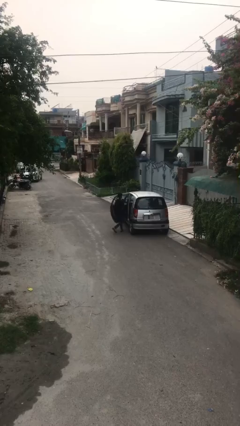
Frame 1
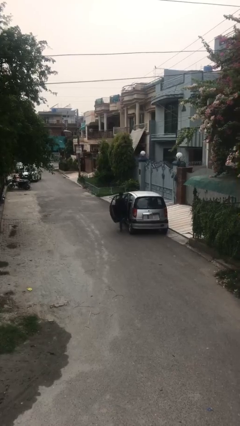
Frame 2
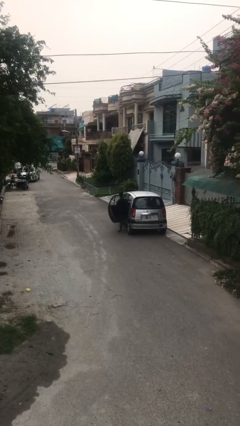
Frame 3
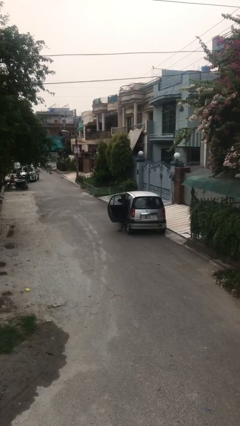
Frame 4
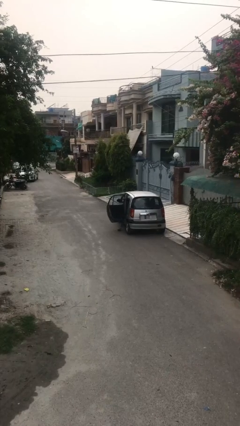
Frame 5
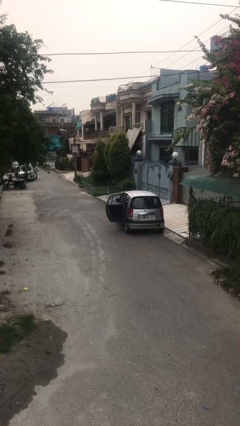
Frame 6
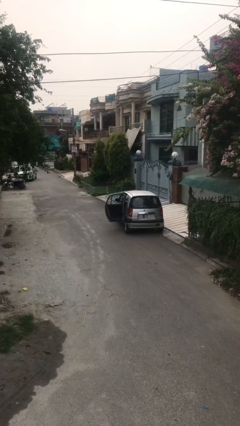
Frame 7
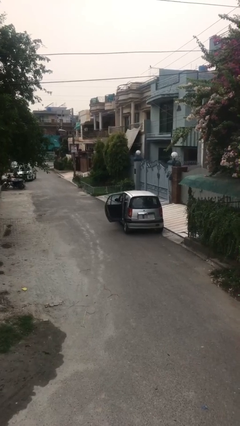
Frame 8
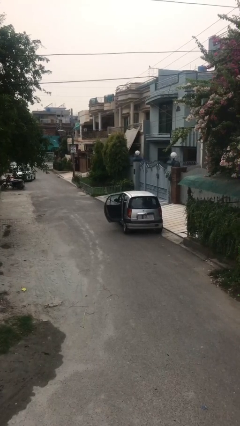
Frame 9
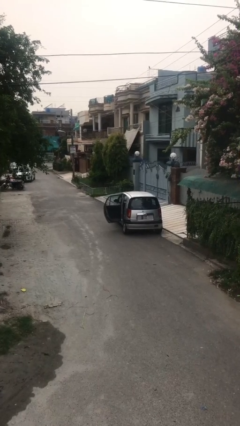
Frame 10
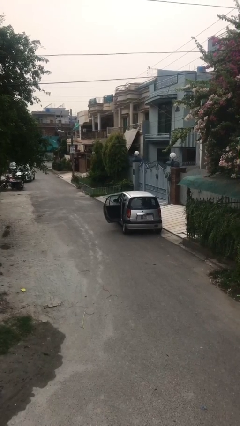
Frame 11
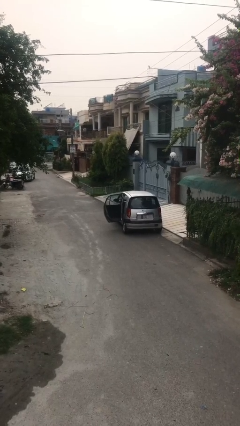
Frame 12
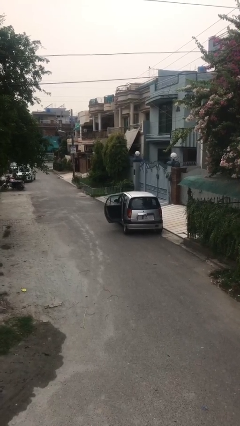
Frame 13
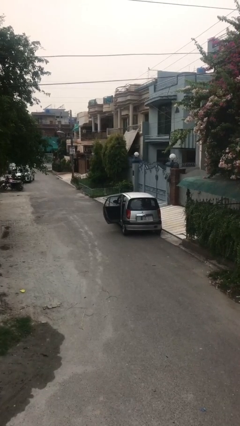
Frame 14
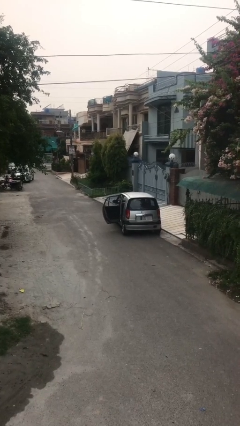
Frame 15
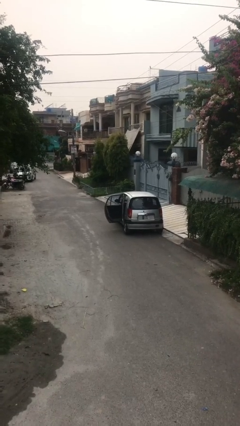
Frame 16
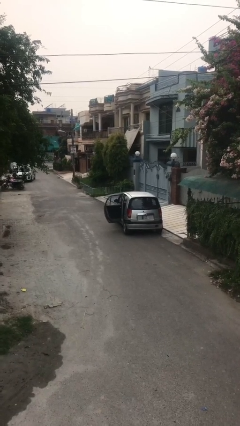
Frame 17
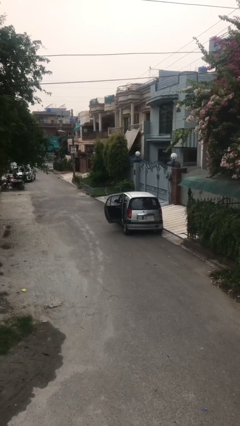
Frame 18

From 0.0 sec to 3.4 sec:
person enters car

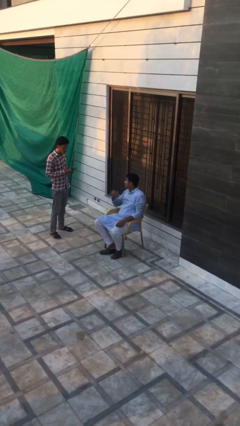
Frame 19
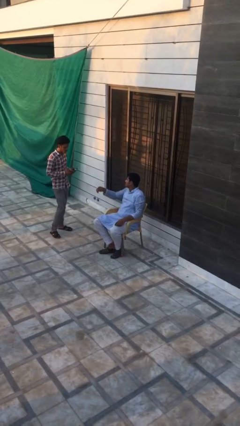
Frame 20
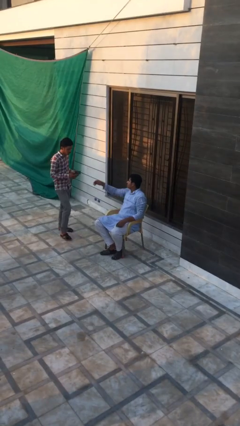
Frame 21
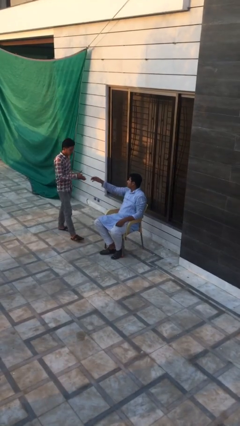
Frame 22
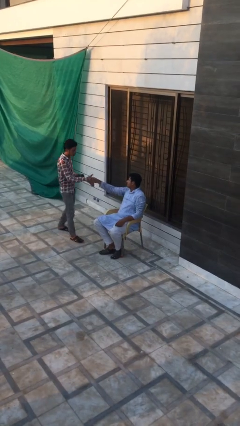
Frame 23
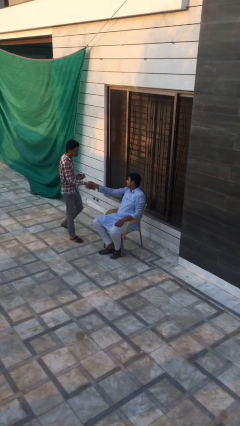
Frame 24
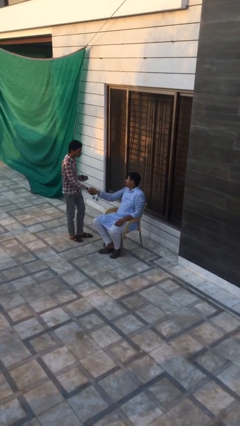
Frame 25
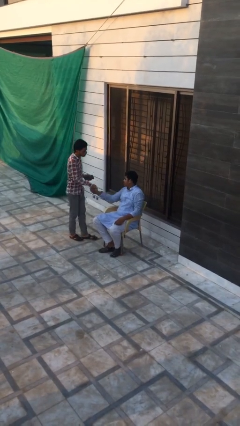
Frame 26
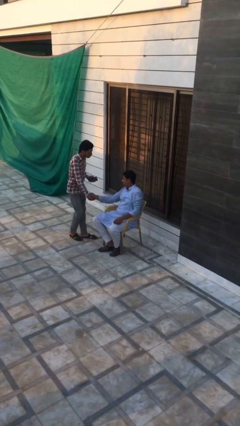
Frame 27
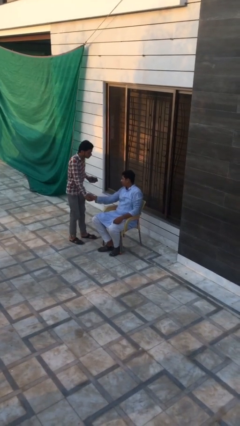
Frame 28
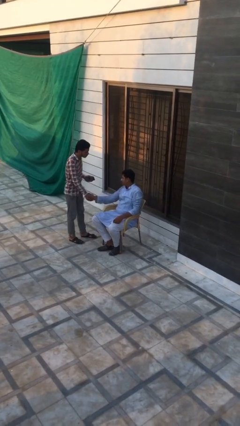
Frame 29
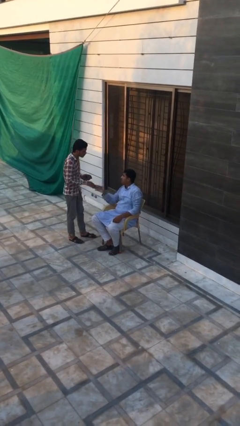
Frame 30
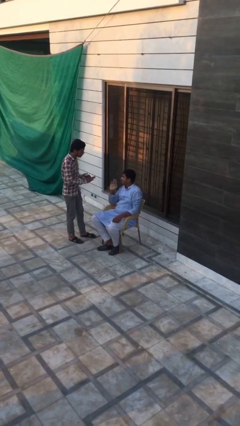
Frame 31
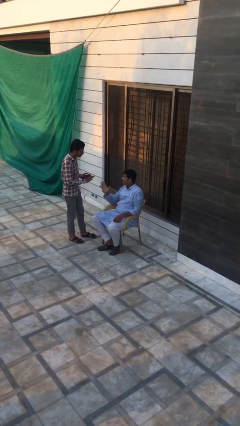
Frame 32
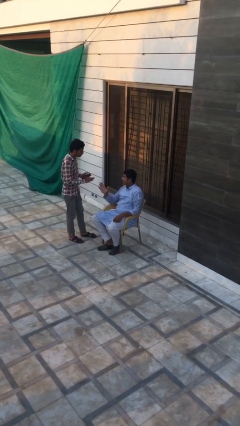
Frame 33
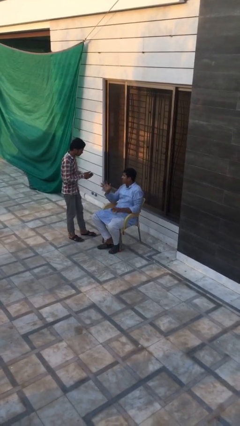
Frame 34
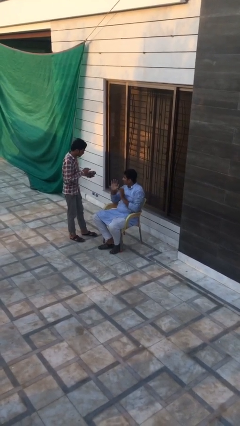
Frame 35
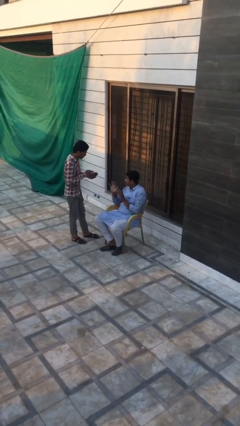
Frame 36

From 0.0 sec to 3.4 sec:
person shakes hand

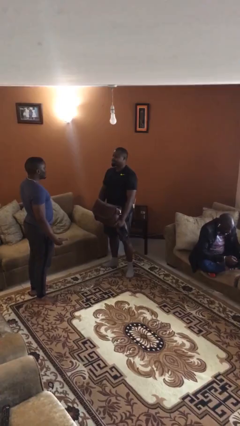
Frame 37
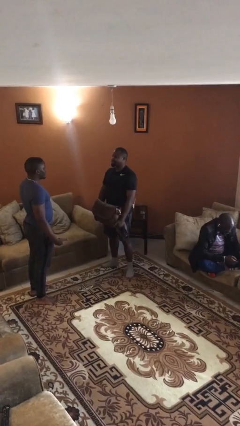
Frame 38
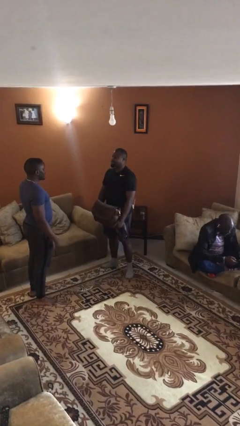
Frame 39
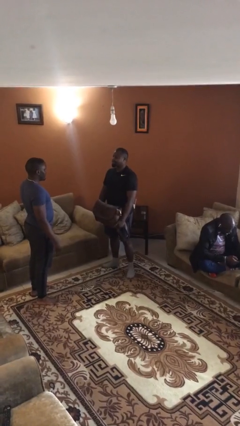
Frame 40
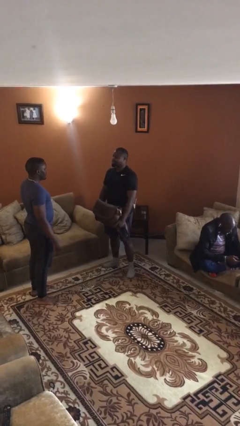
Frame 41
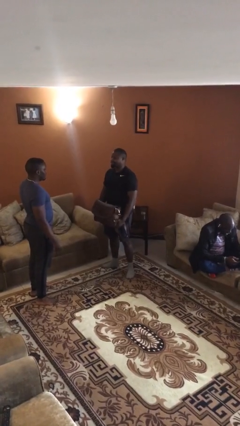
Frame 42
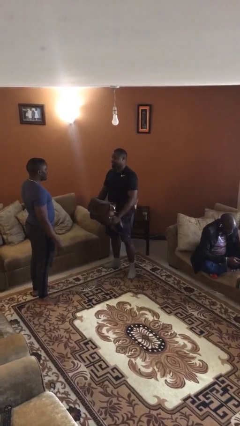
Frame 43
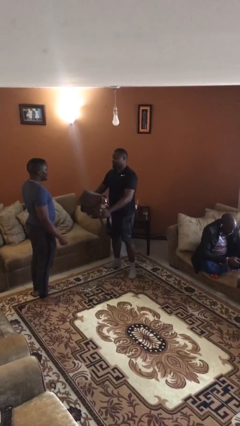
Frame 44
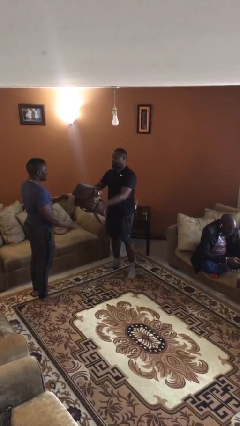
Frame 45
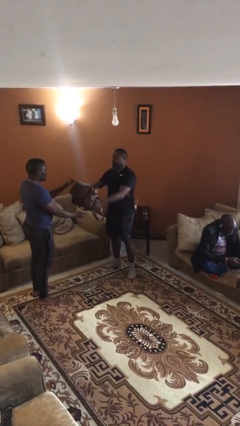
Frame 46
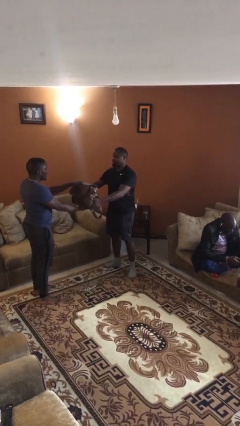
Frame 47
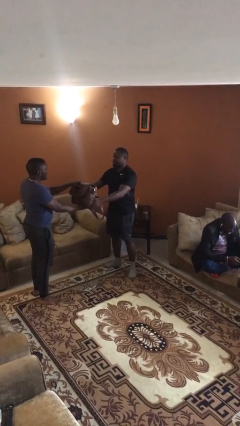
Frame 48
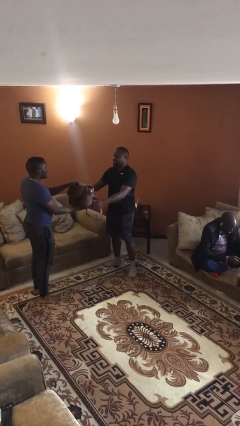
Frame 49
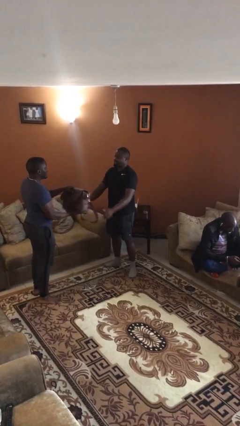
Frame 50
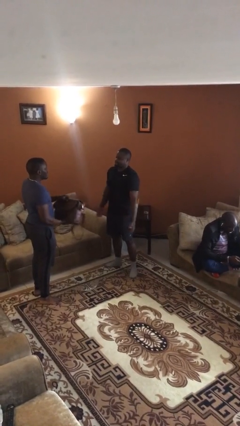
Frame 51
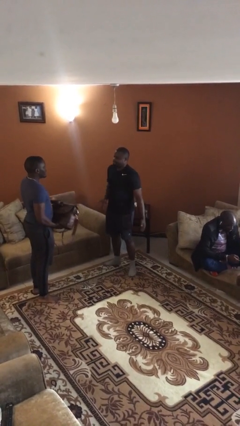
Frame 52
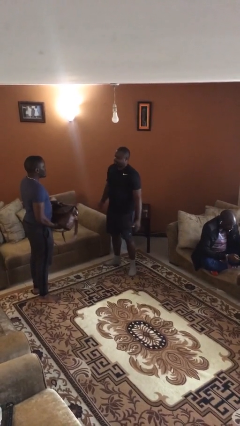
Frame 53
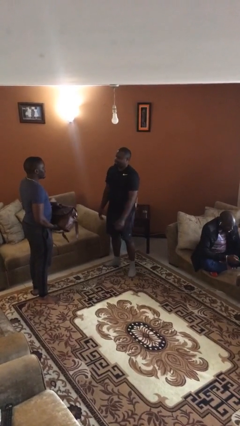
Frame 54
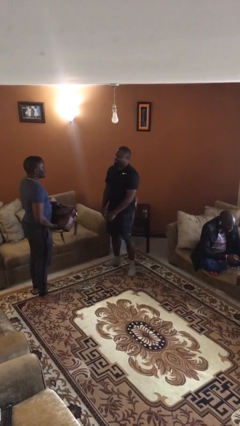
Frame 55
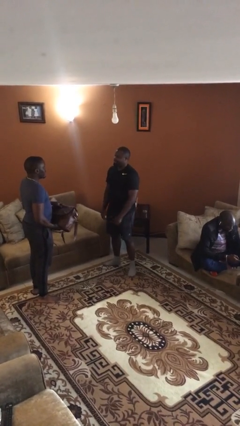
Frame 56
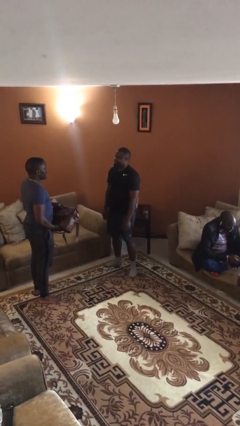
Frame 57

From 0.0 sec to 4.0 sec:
person transfers object to person

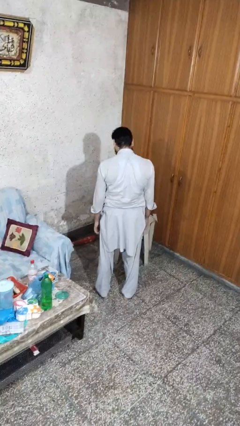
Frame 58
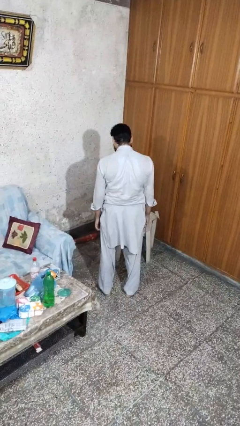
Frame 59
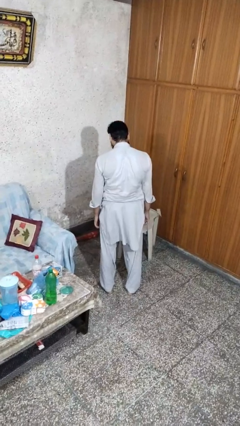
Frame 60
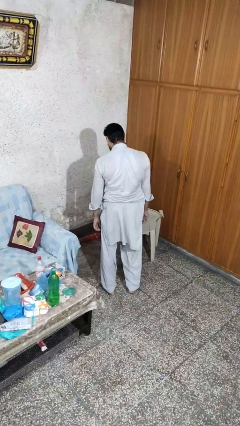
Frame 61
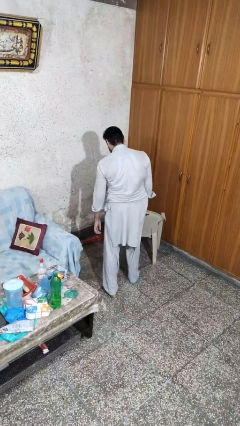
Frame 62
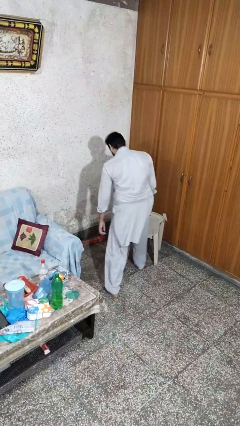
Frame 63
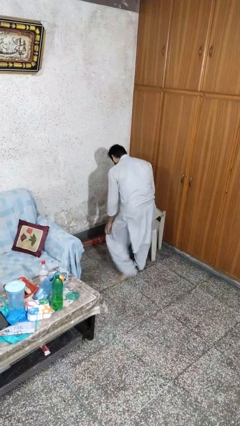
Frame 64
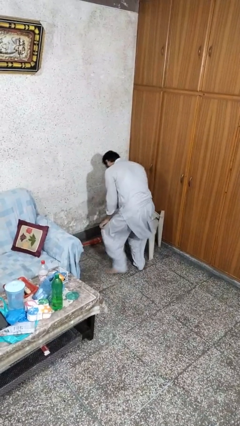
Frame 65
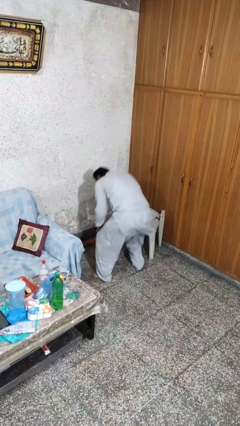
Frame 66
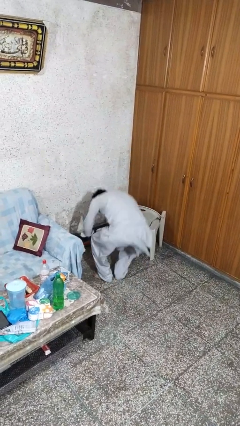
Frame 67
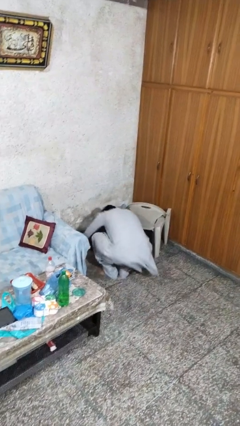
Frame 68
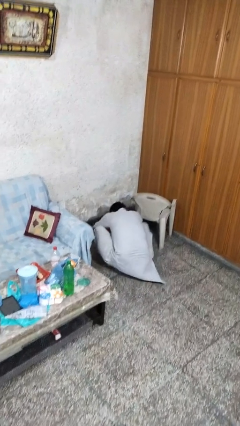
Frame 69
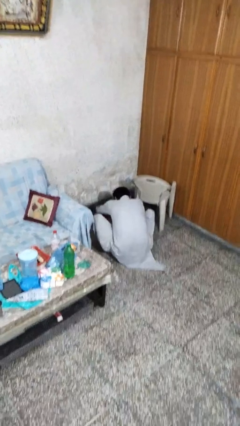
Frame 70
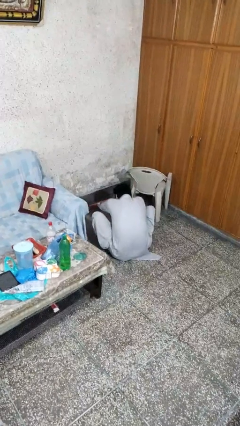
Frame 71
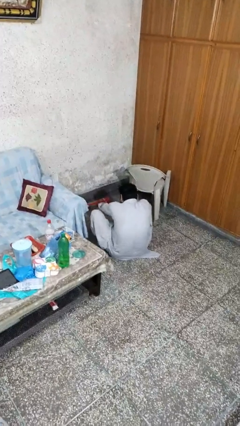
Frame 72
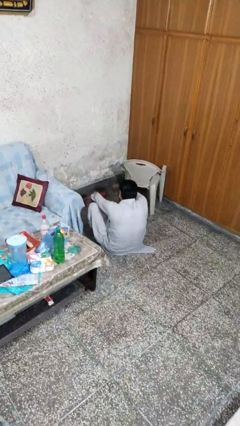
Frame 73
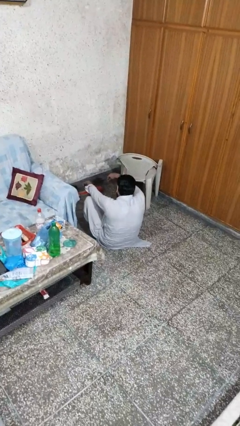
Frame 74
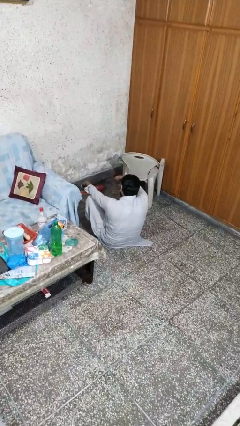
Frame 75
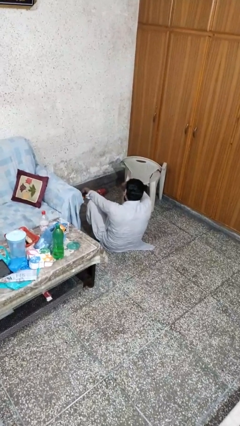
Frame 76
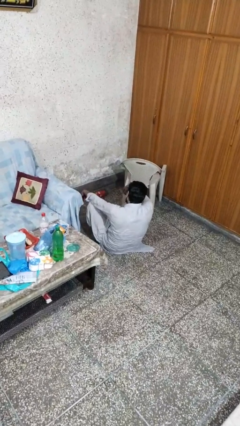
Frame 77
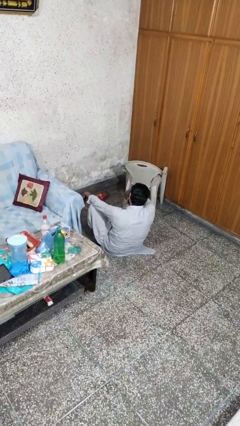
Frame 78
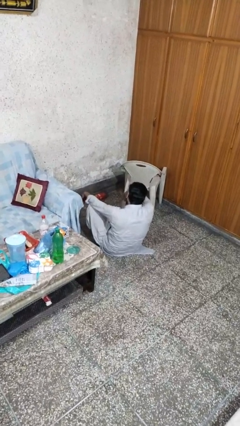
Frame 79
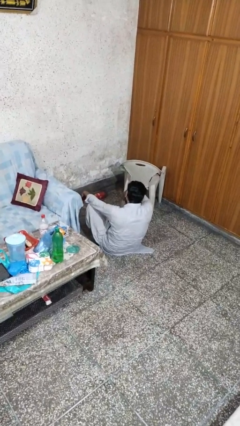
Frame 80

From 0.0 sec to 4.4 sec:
person trips on object on floor

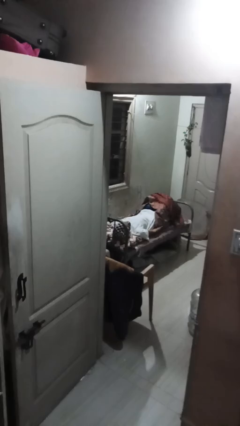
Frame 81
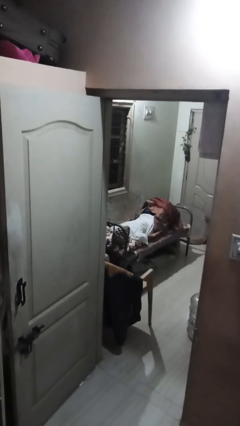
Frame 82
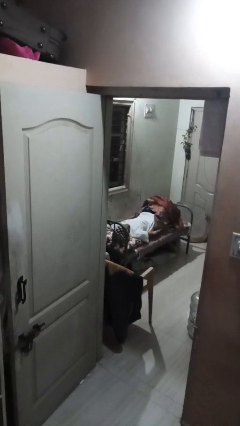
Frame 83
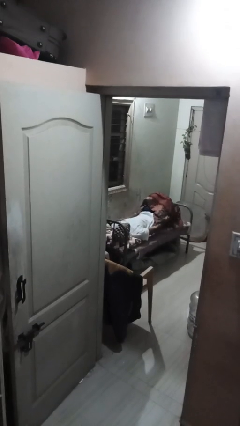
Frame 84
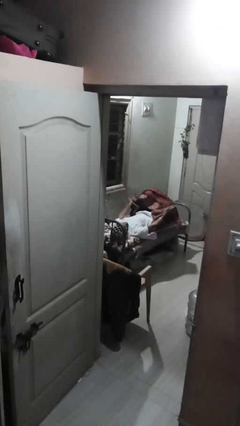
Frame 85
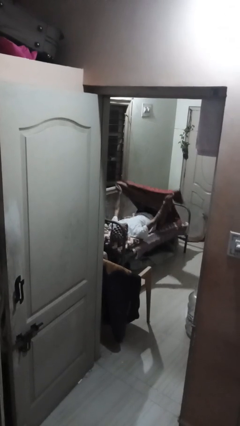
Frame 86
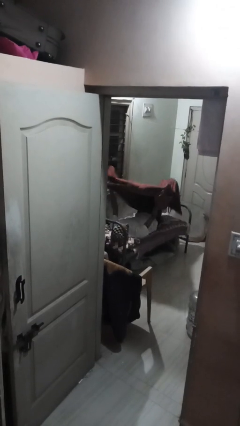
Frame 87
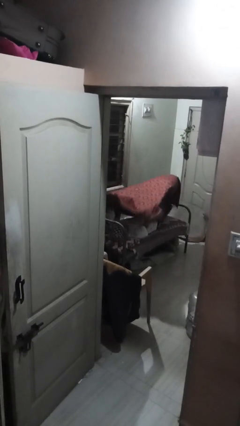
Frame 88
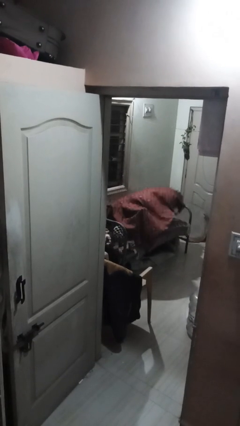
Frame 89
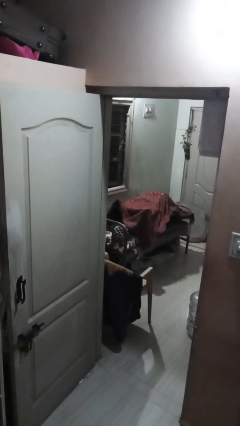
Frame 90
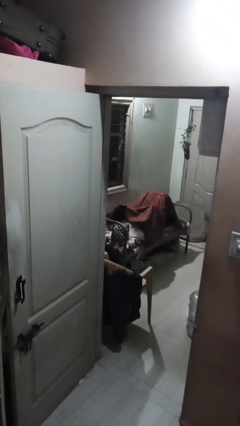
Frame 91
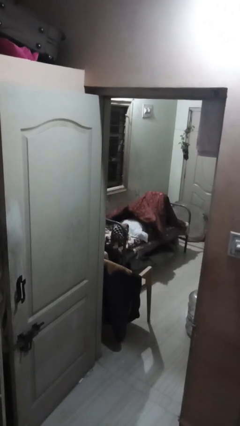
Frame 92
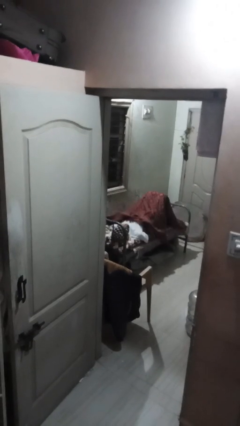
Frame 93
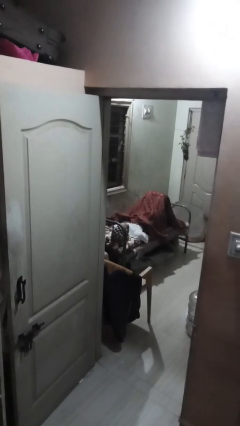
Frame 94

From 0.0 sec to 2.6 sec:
person covers with bedsheets
